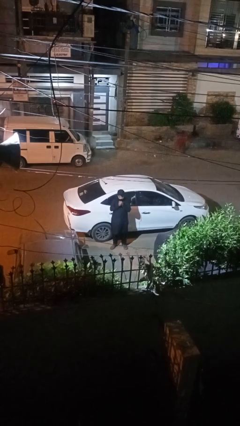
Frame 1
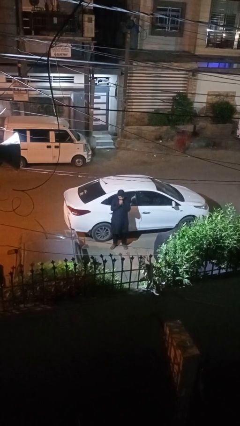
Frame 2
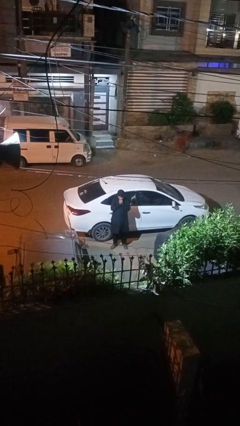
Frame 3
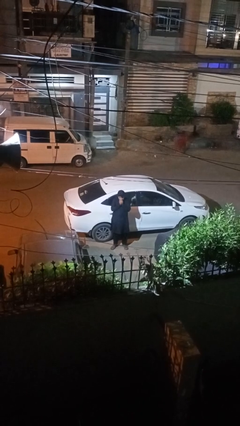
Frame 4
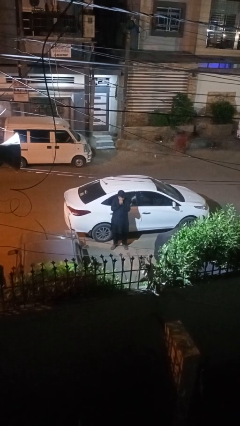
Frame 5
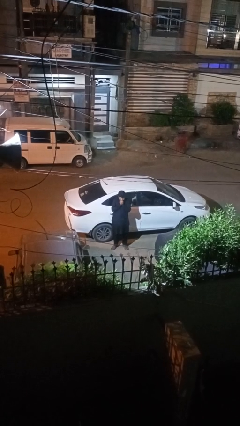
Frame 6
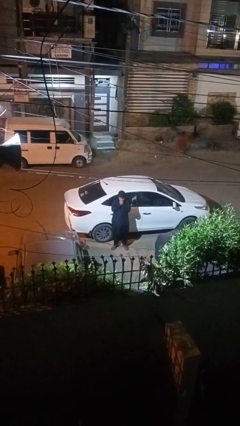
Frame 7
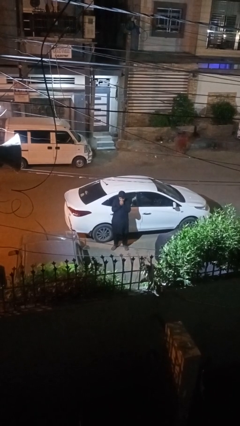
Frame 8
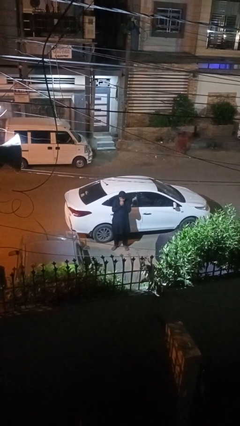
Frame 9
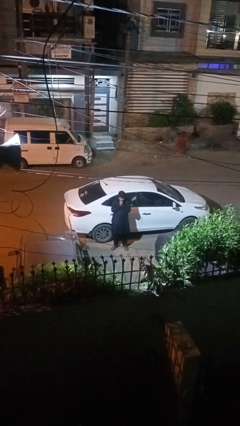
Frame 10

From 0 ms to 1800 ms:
person blows into hands

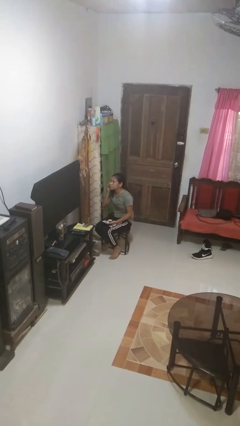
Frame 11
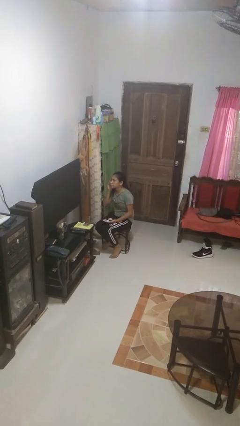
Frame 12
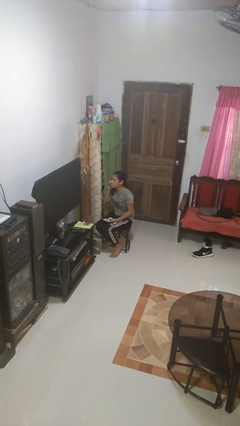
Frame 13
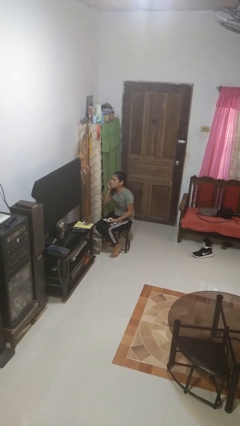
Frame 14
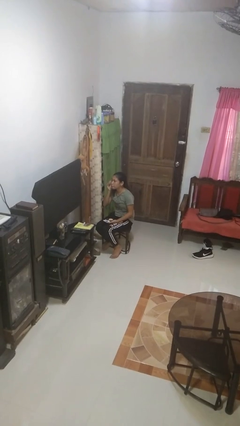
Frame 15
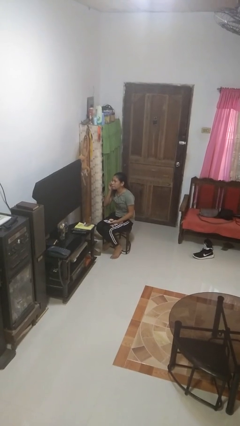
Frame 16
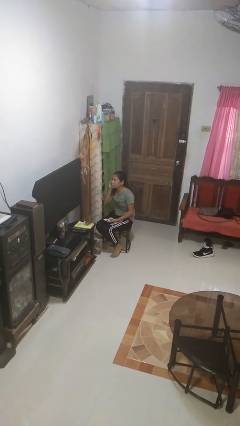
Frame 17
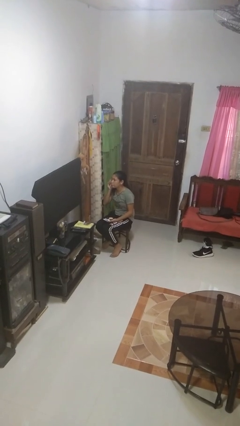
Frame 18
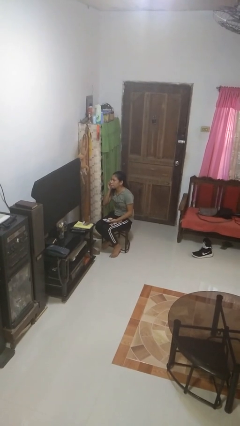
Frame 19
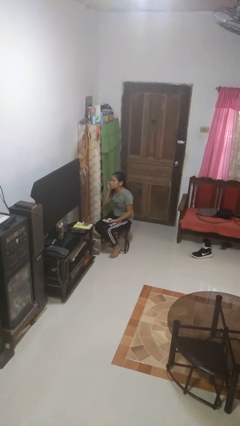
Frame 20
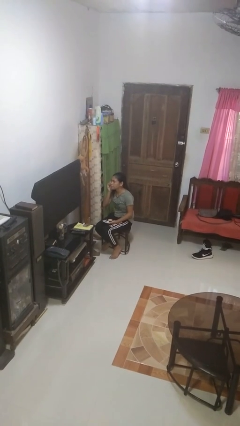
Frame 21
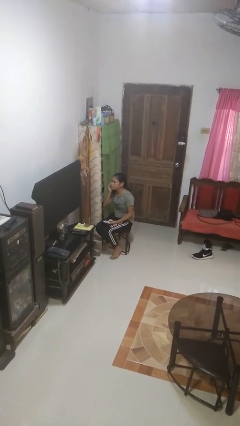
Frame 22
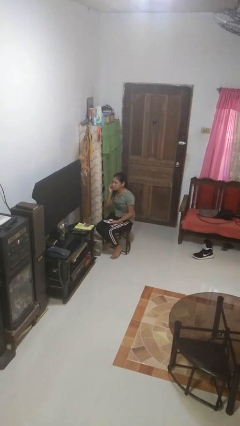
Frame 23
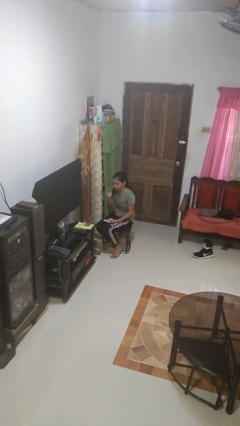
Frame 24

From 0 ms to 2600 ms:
person applies foundation makeup

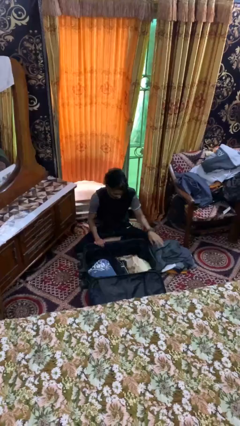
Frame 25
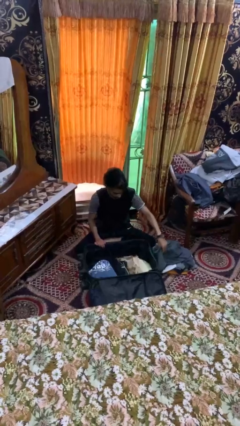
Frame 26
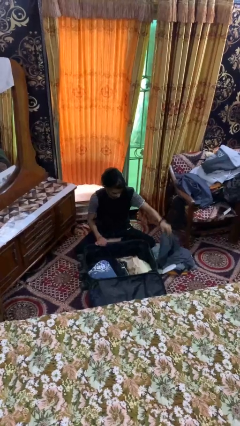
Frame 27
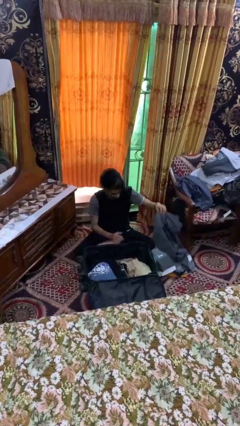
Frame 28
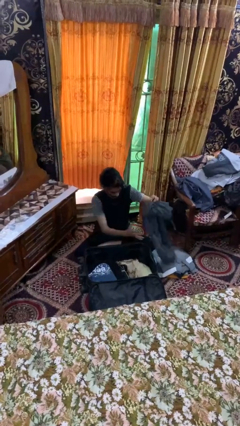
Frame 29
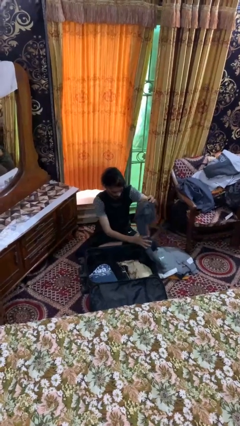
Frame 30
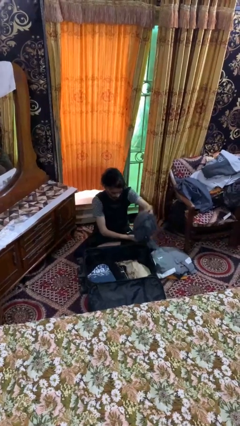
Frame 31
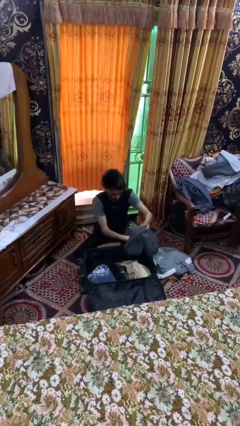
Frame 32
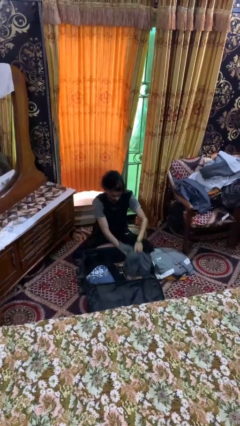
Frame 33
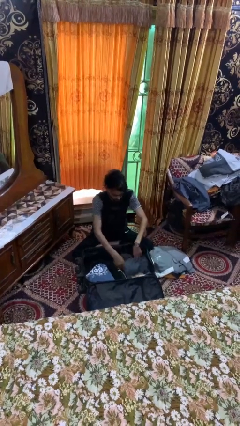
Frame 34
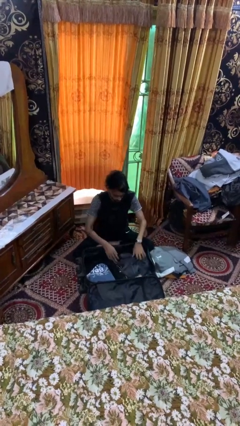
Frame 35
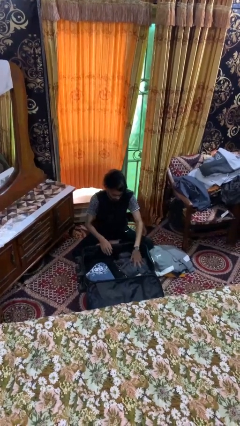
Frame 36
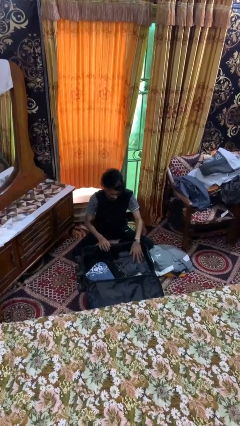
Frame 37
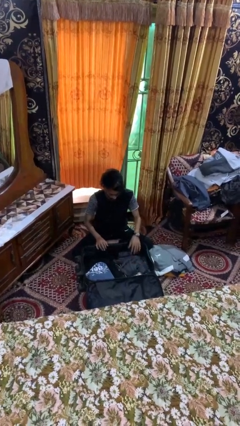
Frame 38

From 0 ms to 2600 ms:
person loads clothes into suitcase

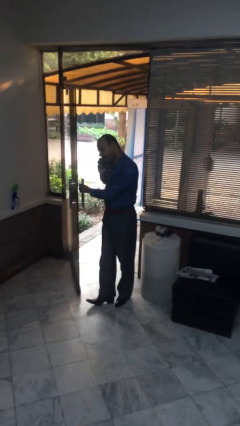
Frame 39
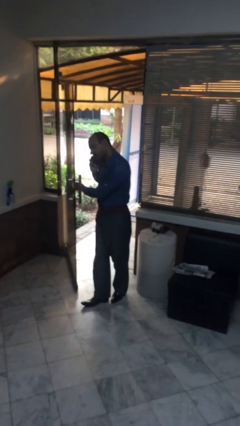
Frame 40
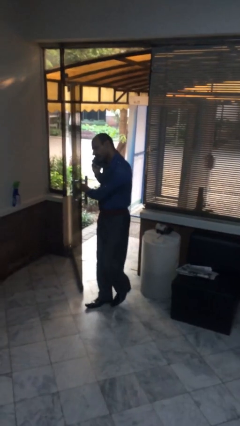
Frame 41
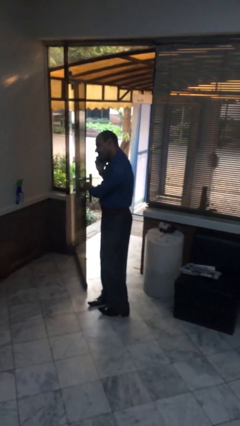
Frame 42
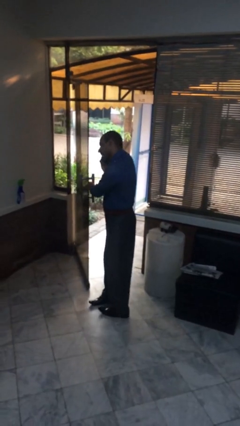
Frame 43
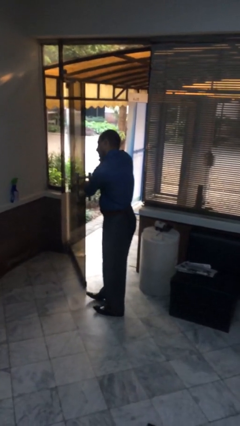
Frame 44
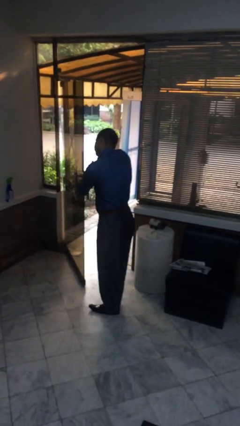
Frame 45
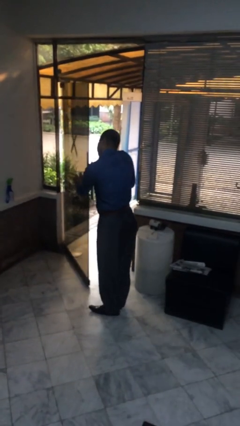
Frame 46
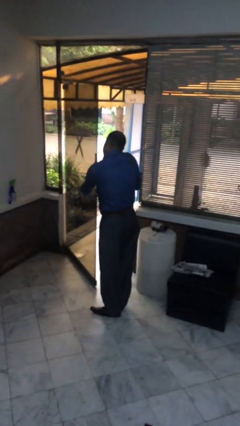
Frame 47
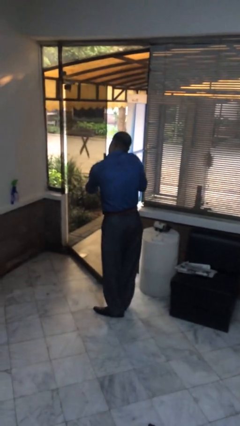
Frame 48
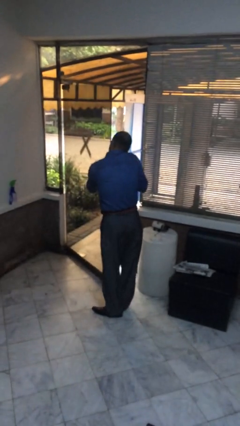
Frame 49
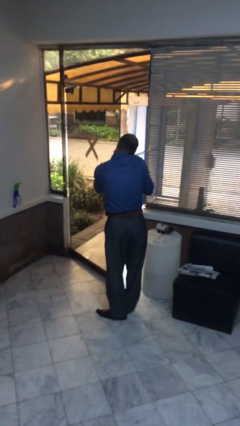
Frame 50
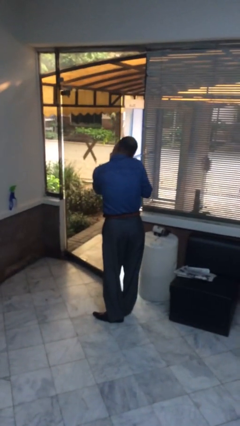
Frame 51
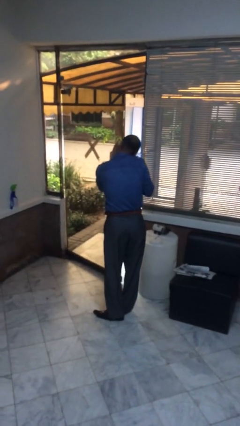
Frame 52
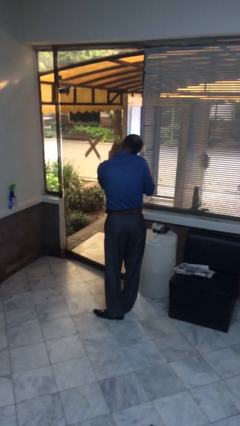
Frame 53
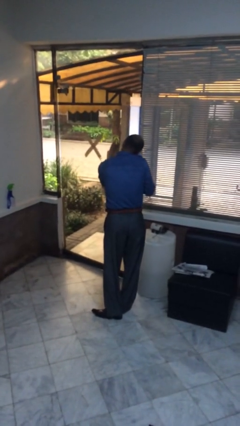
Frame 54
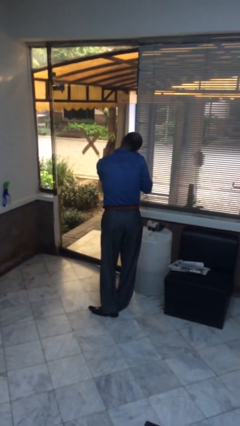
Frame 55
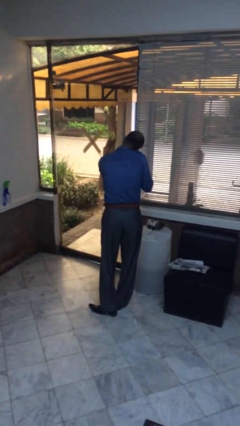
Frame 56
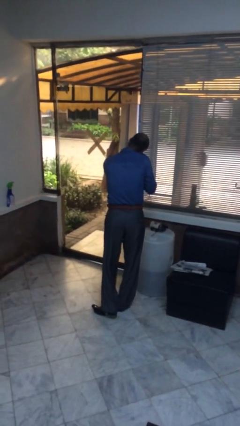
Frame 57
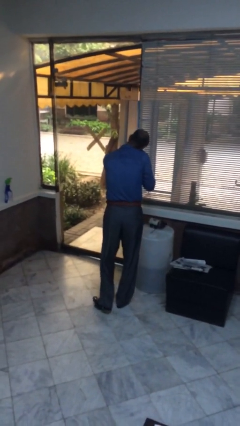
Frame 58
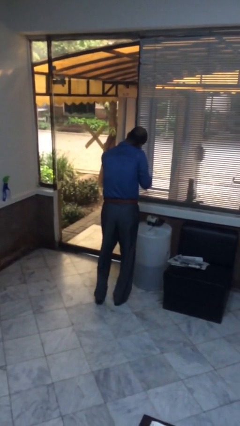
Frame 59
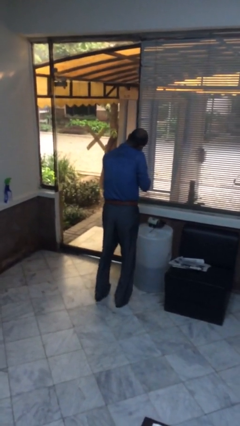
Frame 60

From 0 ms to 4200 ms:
person closes facility door

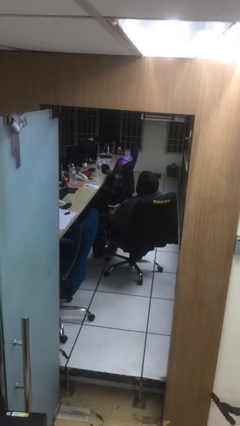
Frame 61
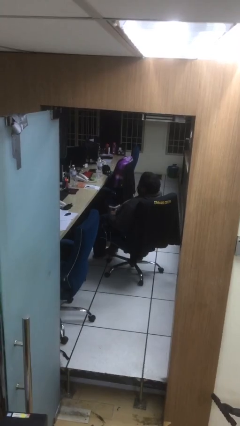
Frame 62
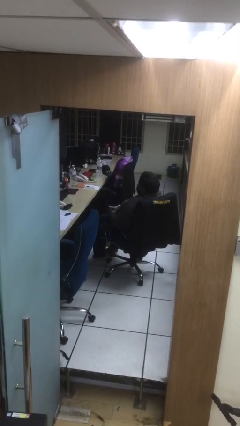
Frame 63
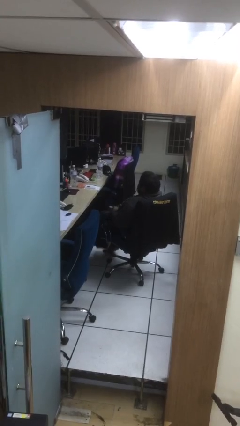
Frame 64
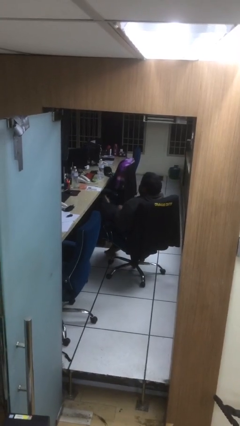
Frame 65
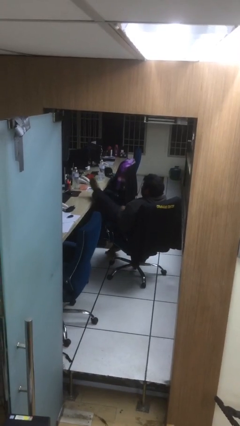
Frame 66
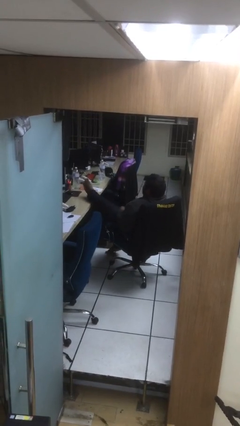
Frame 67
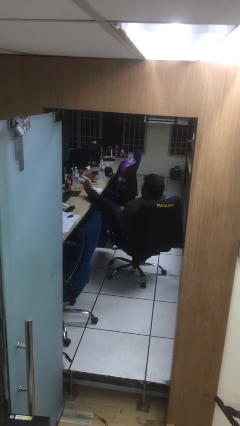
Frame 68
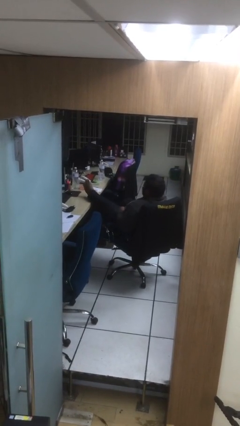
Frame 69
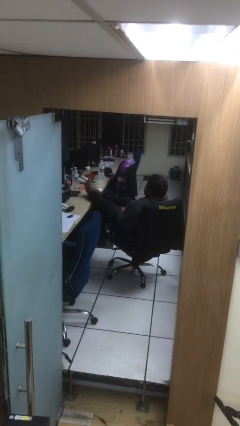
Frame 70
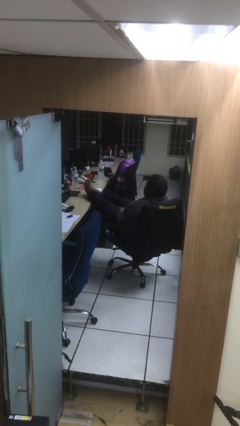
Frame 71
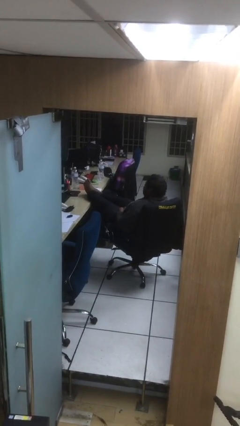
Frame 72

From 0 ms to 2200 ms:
person puts feet up

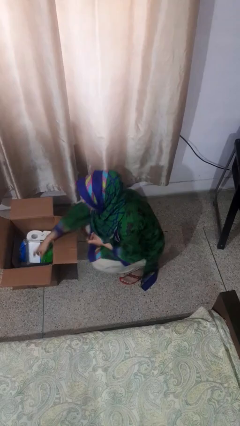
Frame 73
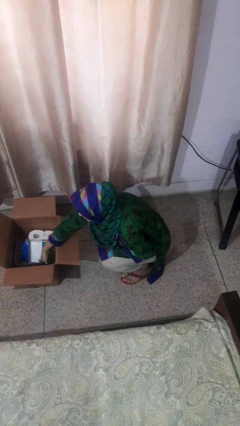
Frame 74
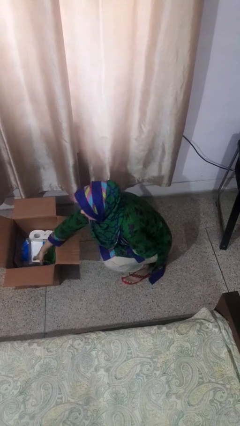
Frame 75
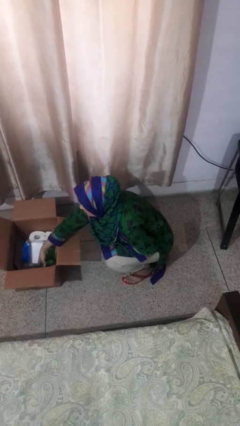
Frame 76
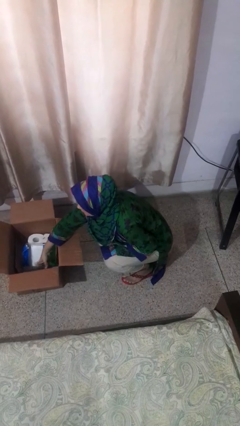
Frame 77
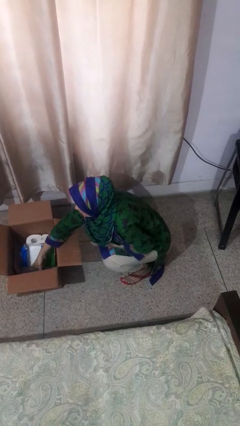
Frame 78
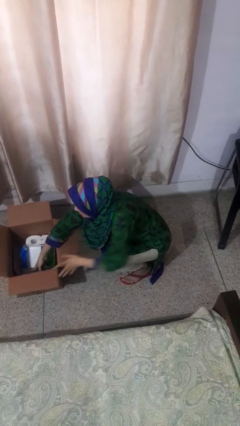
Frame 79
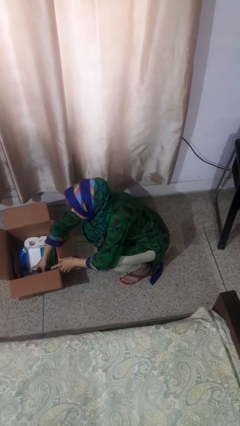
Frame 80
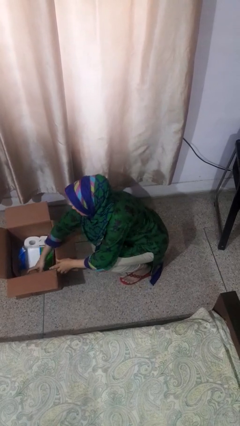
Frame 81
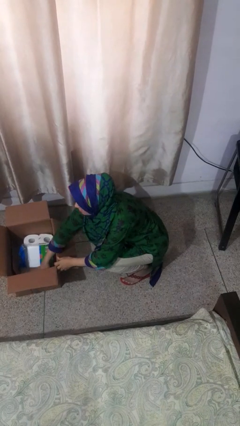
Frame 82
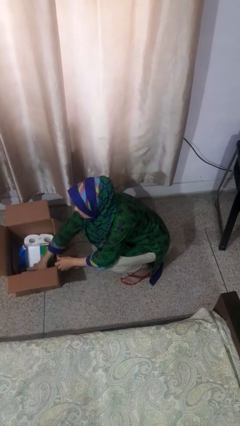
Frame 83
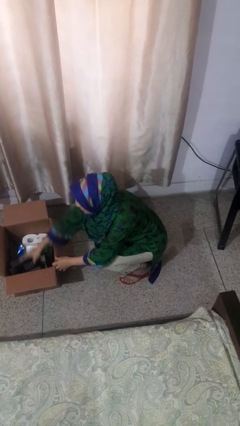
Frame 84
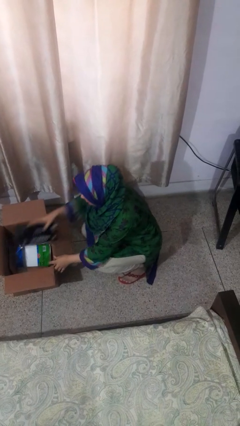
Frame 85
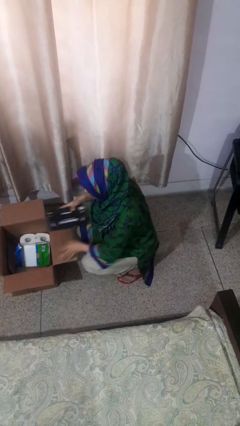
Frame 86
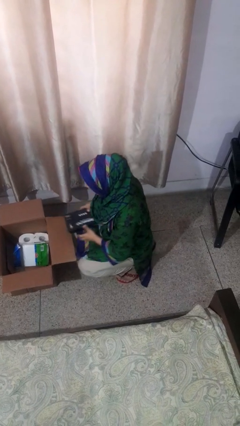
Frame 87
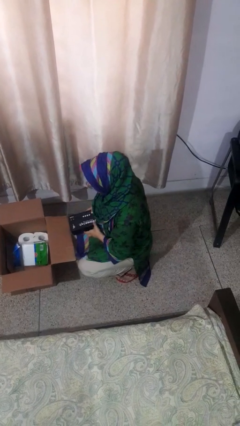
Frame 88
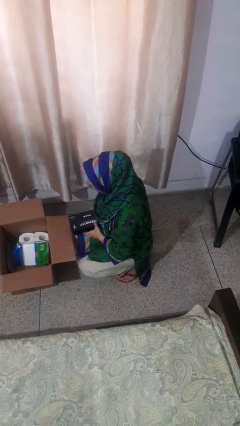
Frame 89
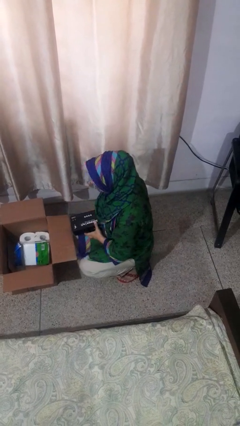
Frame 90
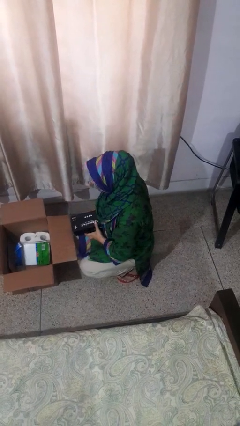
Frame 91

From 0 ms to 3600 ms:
person takes object from box
